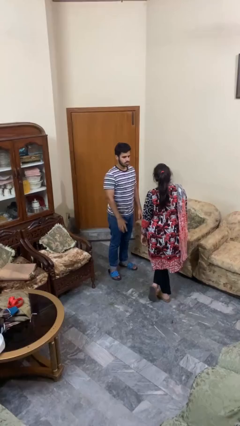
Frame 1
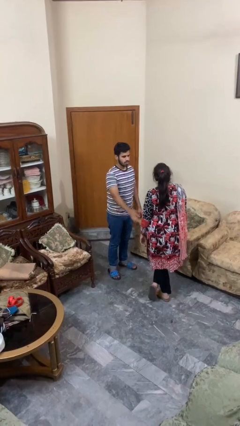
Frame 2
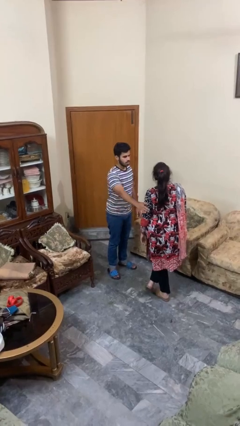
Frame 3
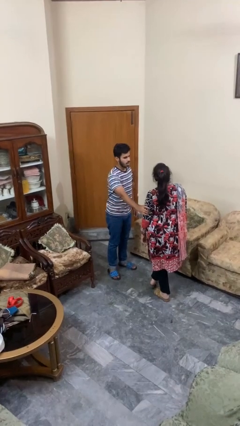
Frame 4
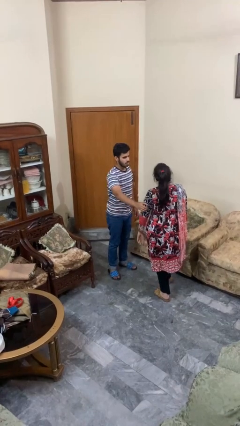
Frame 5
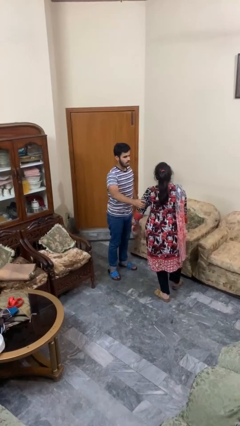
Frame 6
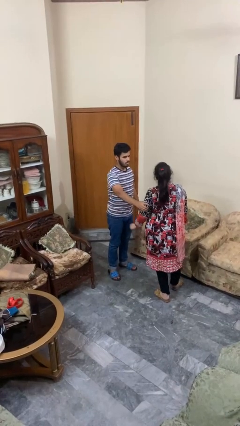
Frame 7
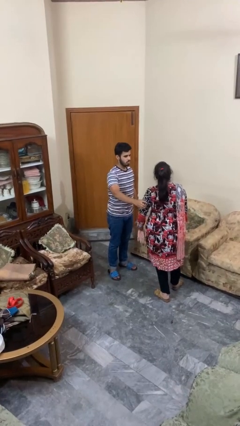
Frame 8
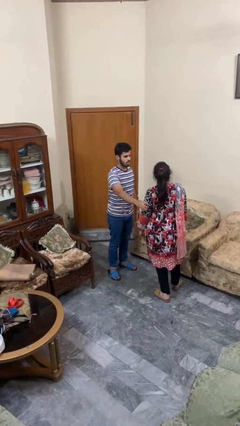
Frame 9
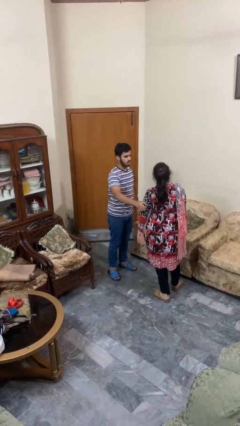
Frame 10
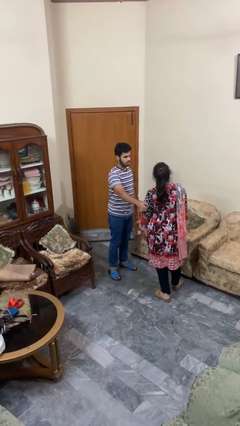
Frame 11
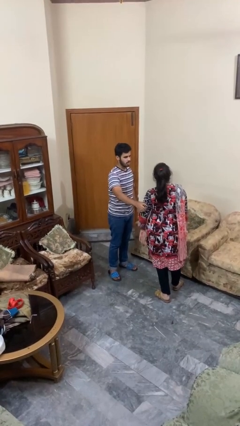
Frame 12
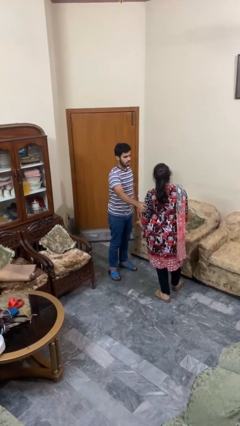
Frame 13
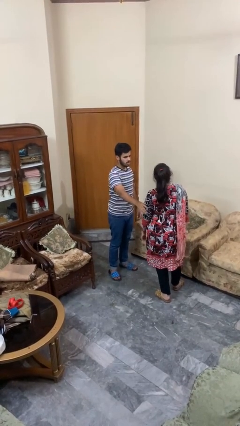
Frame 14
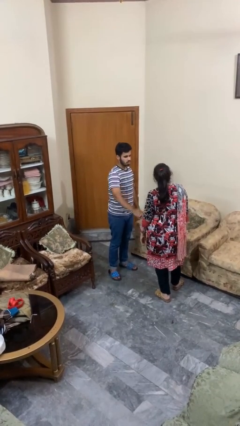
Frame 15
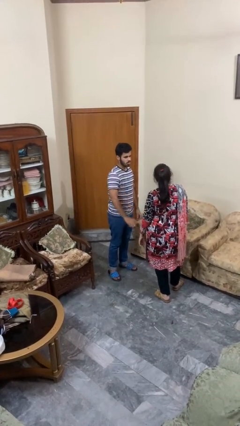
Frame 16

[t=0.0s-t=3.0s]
person grabs person by bicep

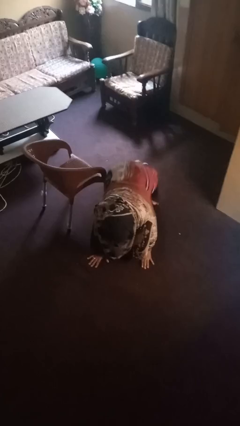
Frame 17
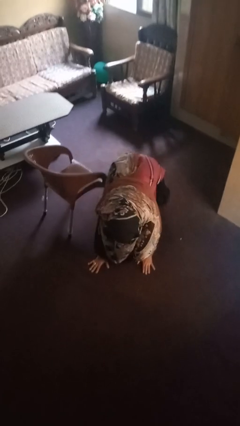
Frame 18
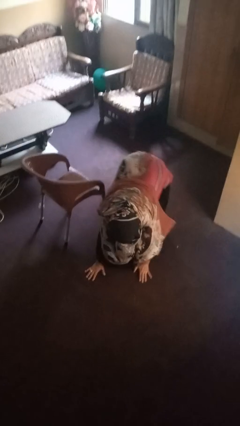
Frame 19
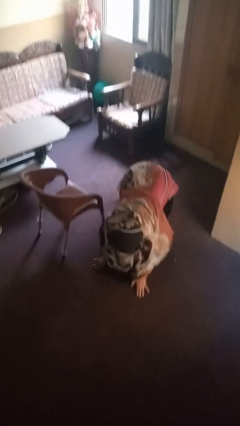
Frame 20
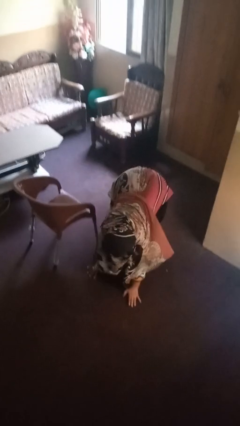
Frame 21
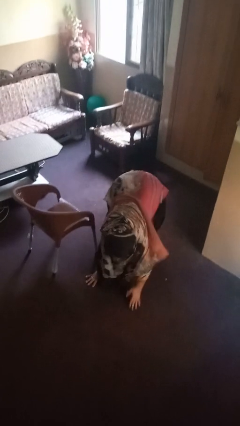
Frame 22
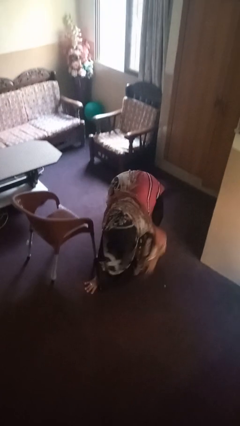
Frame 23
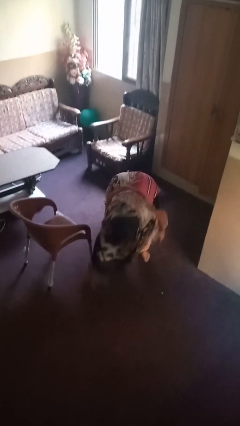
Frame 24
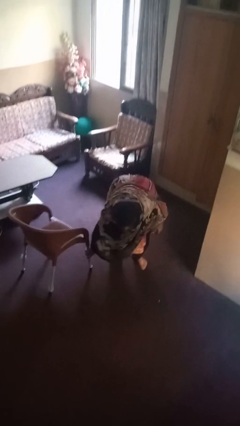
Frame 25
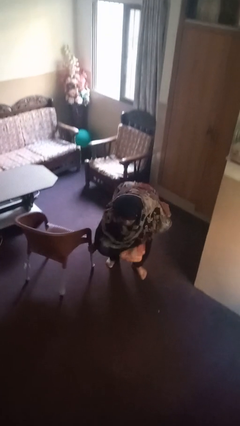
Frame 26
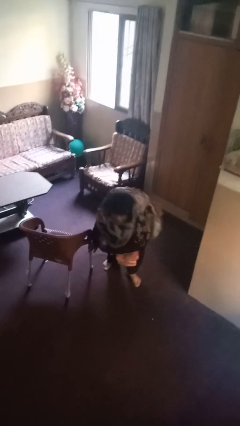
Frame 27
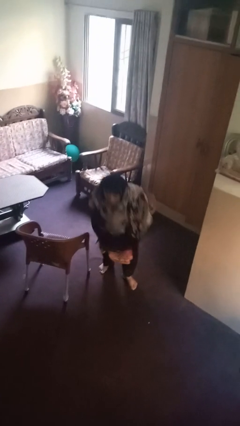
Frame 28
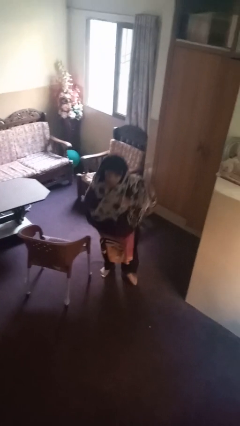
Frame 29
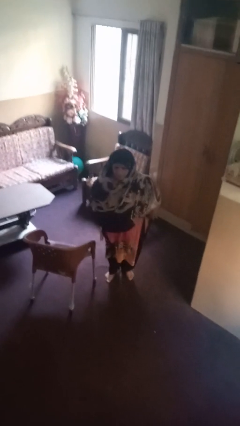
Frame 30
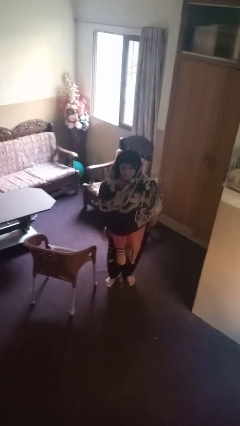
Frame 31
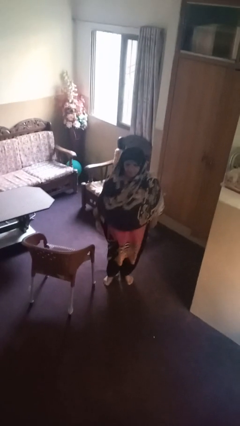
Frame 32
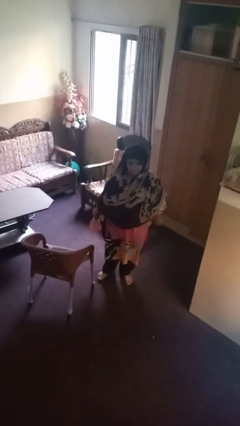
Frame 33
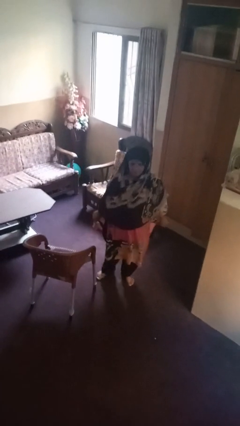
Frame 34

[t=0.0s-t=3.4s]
person stands up from floor

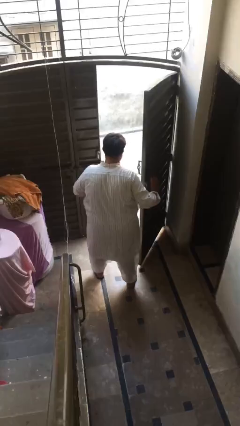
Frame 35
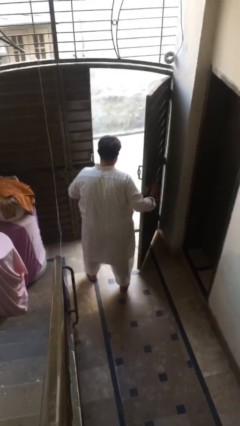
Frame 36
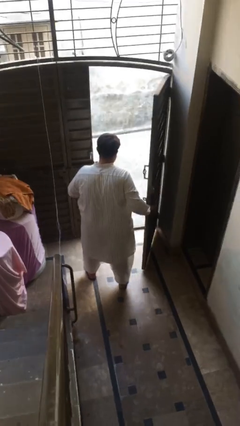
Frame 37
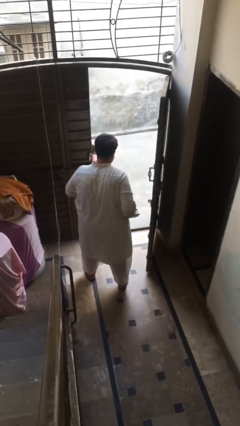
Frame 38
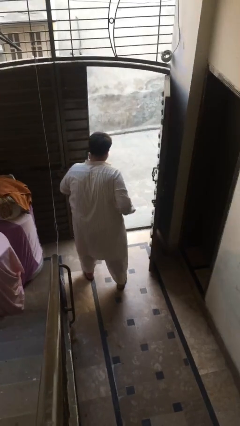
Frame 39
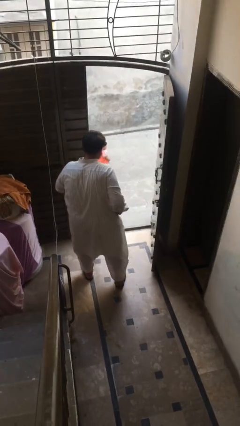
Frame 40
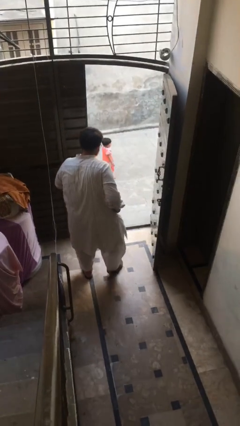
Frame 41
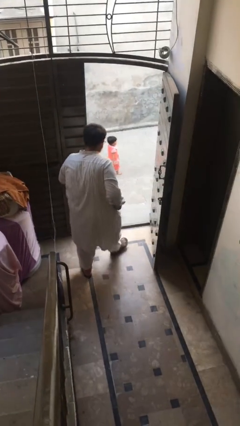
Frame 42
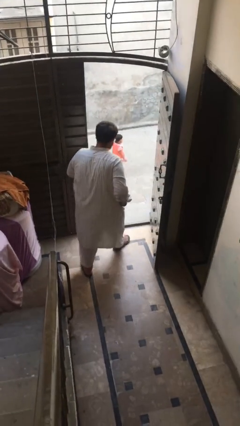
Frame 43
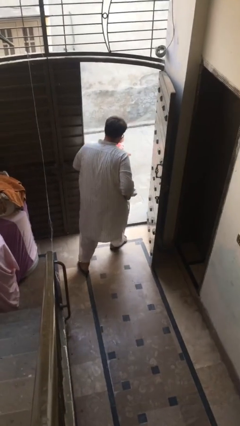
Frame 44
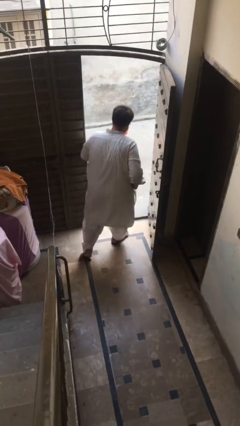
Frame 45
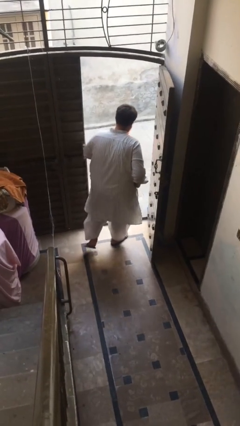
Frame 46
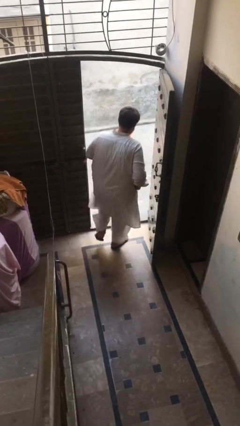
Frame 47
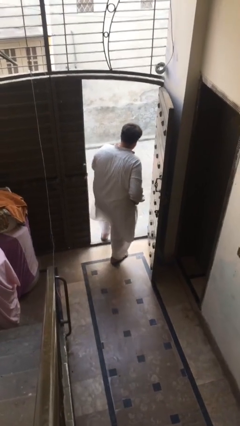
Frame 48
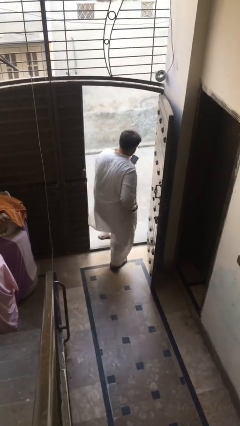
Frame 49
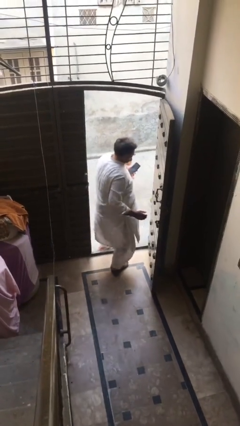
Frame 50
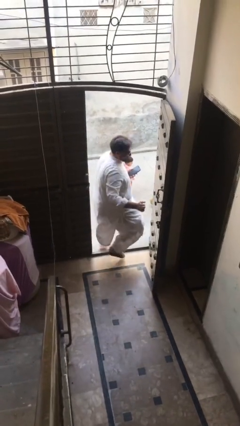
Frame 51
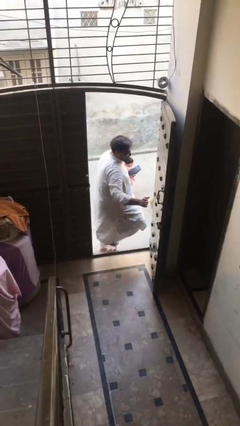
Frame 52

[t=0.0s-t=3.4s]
person exits scene through structure

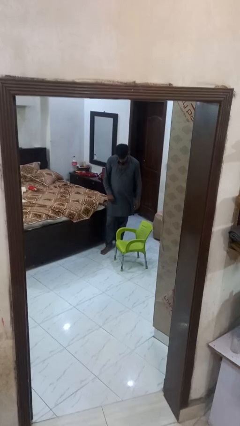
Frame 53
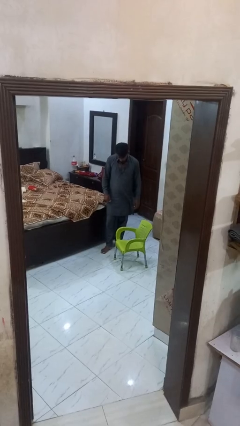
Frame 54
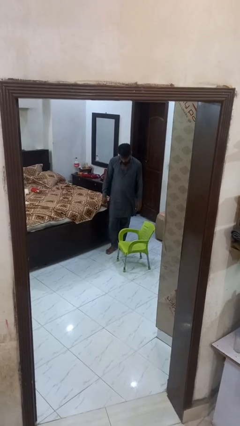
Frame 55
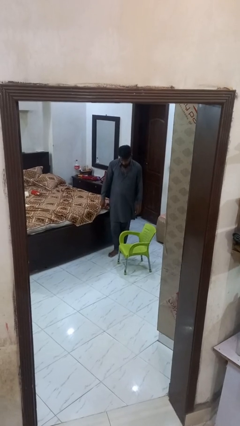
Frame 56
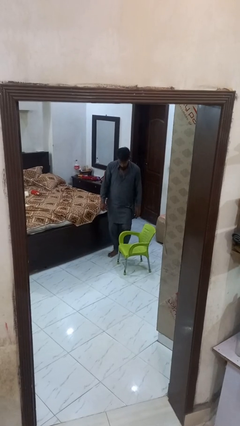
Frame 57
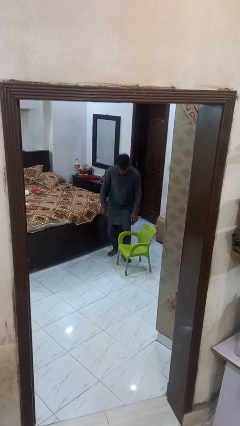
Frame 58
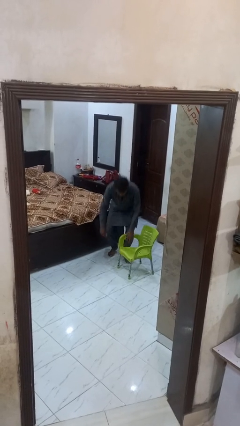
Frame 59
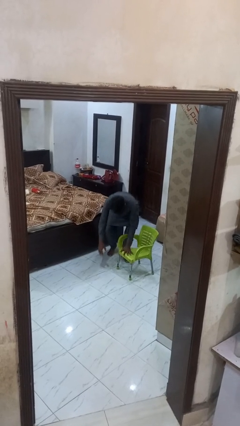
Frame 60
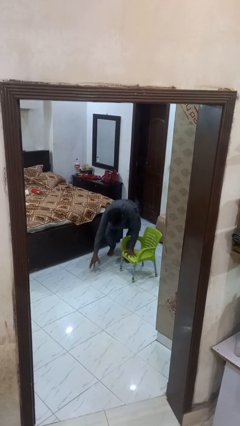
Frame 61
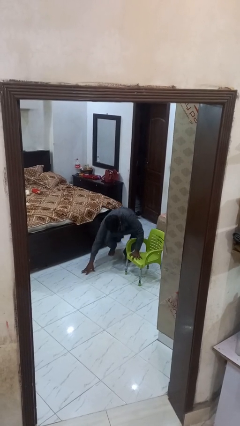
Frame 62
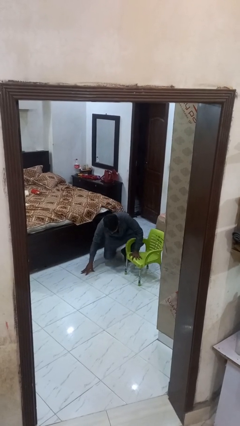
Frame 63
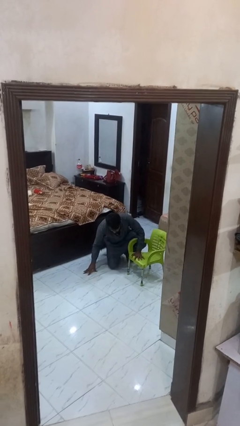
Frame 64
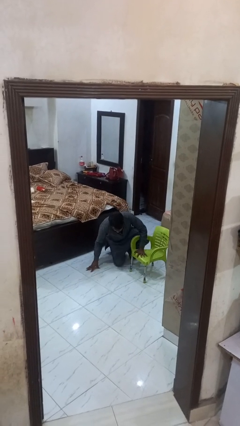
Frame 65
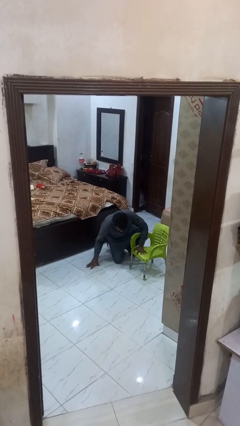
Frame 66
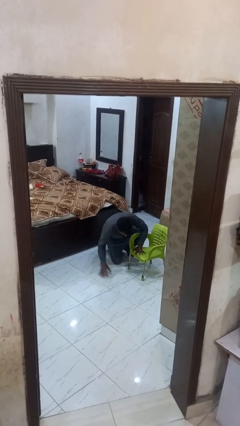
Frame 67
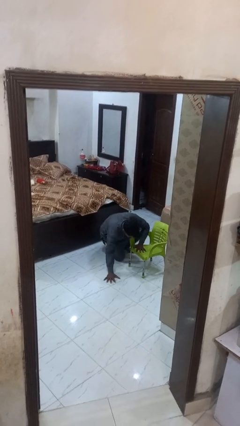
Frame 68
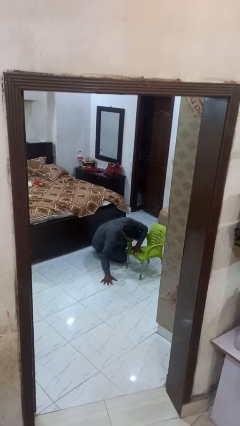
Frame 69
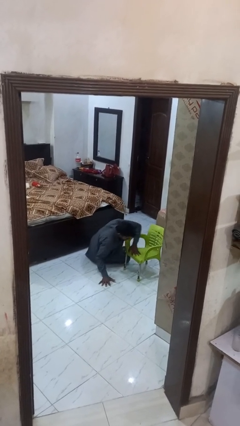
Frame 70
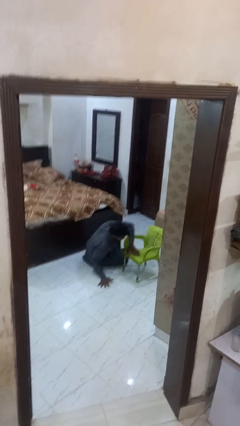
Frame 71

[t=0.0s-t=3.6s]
person trips on object on floor

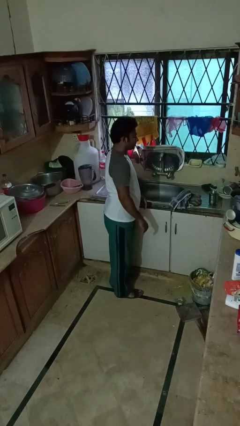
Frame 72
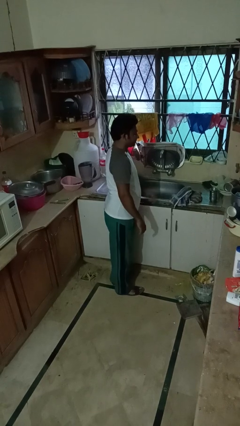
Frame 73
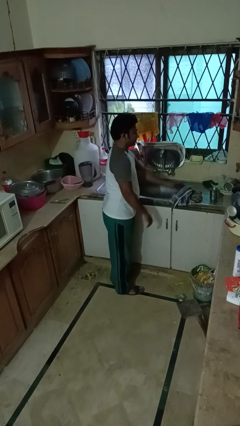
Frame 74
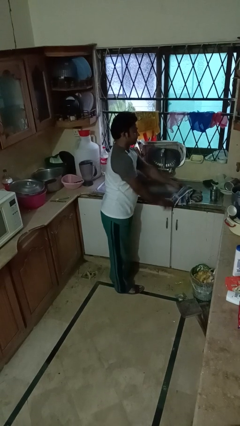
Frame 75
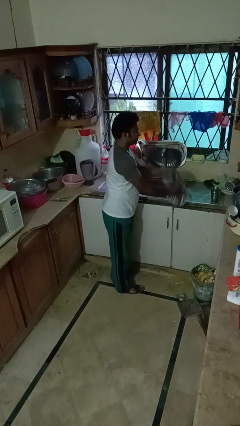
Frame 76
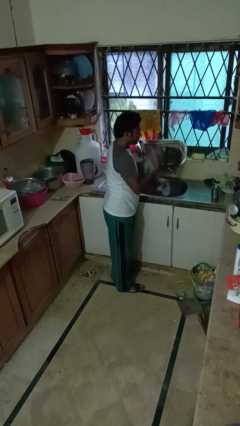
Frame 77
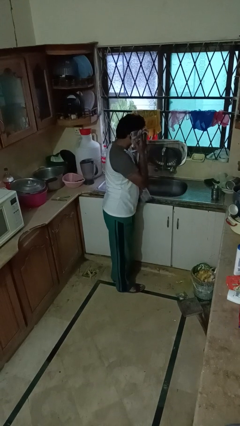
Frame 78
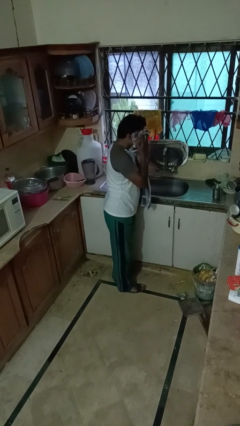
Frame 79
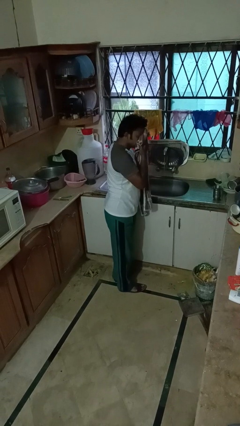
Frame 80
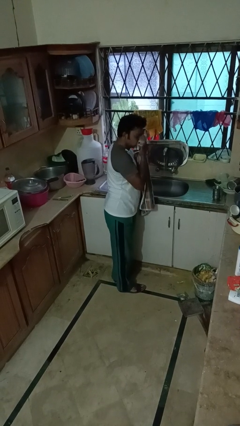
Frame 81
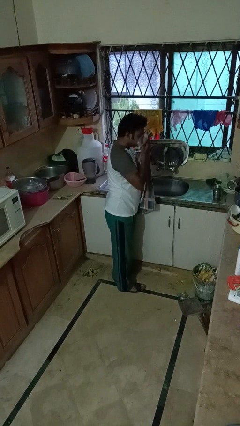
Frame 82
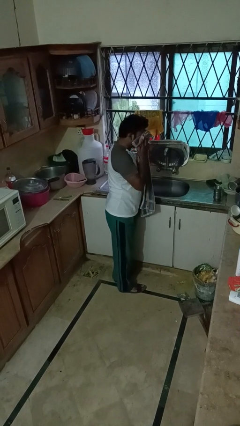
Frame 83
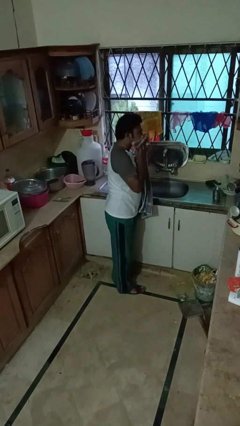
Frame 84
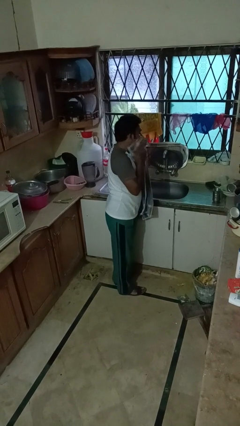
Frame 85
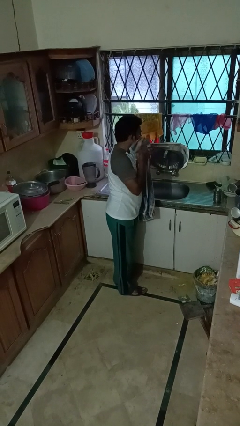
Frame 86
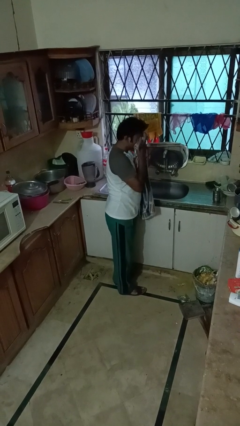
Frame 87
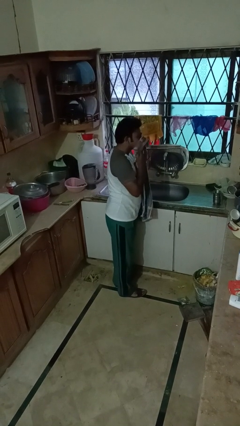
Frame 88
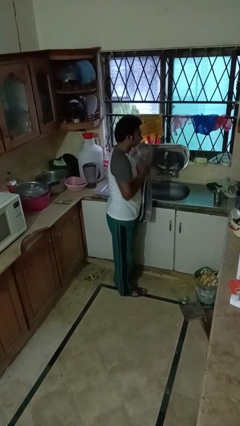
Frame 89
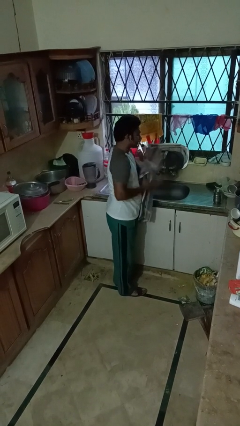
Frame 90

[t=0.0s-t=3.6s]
person dries face with towel

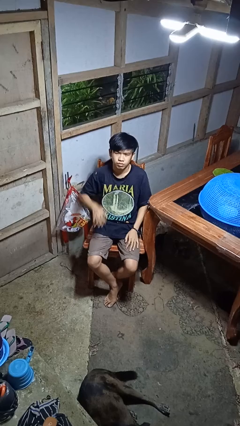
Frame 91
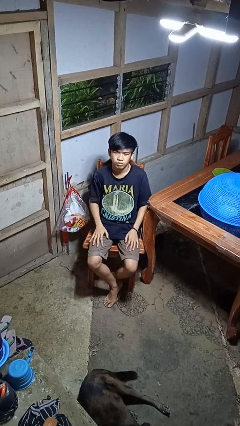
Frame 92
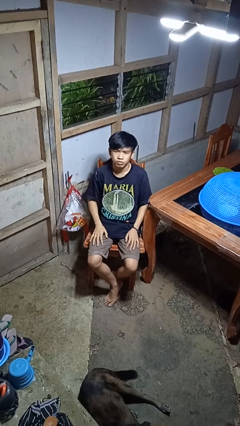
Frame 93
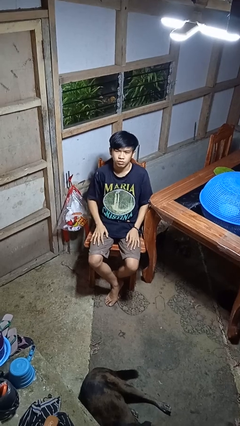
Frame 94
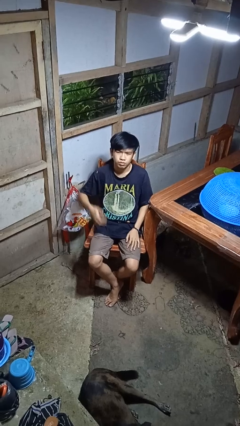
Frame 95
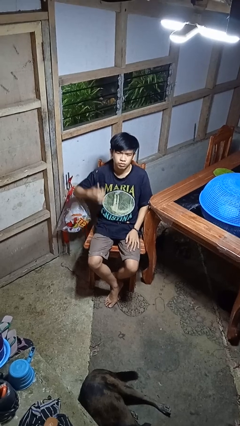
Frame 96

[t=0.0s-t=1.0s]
person gestures call me
